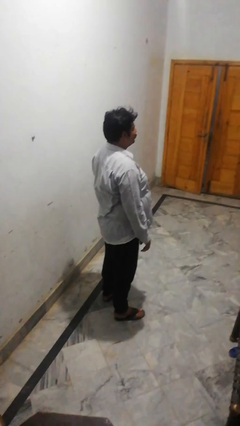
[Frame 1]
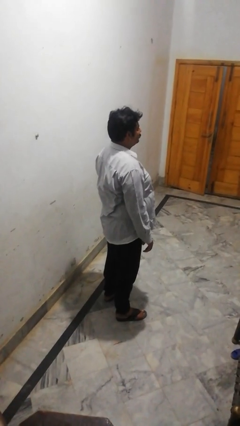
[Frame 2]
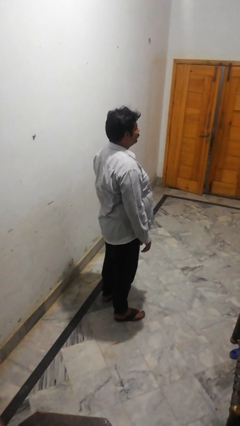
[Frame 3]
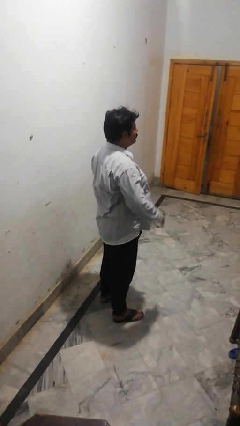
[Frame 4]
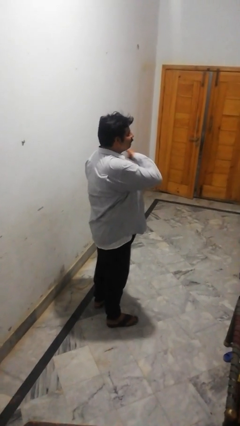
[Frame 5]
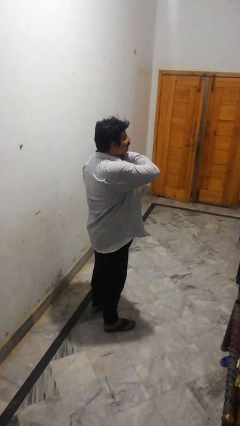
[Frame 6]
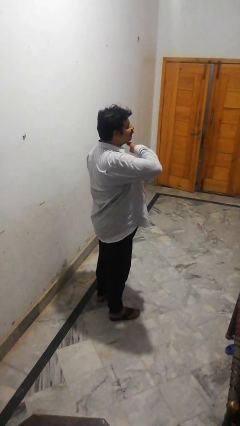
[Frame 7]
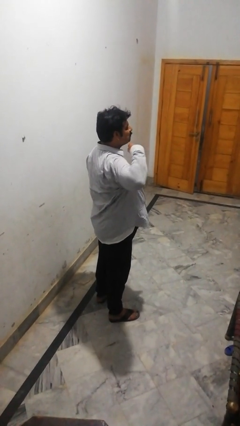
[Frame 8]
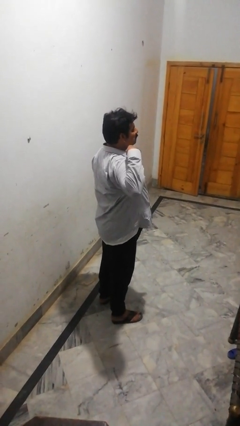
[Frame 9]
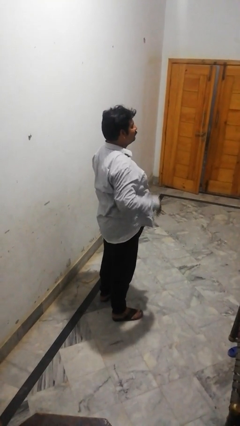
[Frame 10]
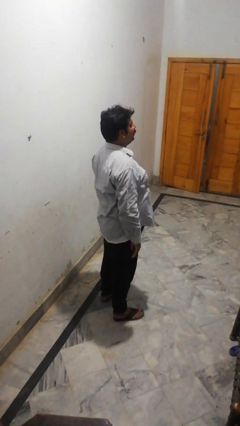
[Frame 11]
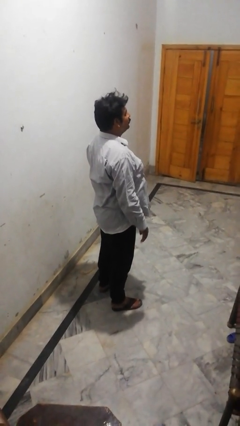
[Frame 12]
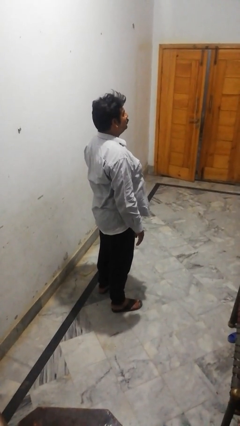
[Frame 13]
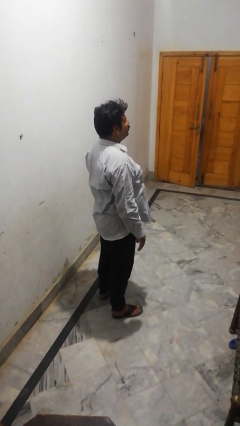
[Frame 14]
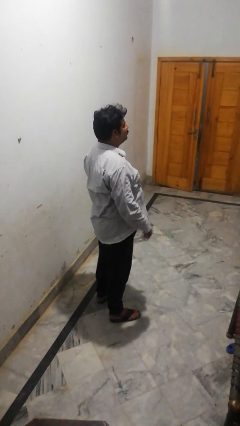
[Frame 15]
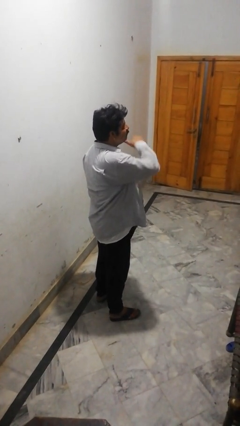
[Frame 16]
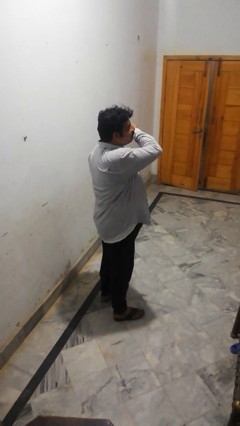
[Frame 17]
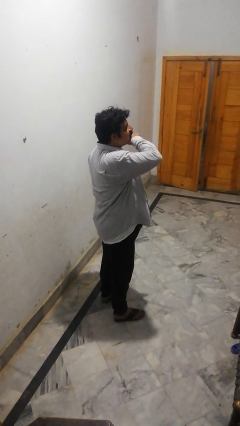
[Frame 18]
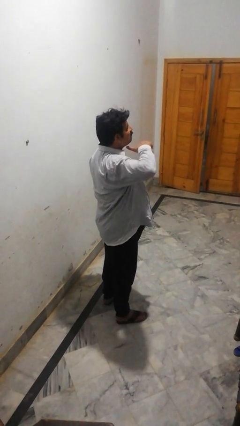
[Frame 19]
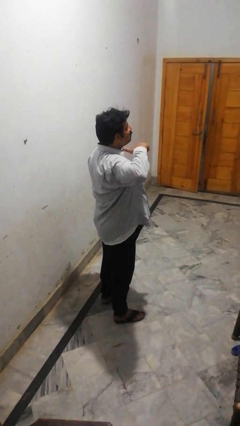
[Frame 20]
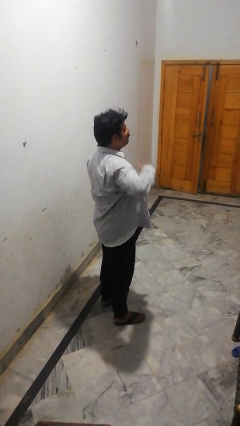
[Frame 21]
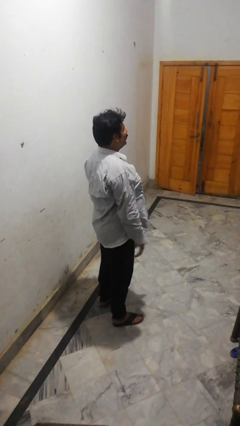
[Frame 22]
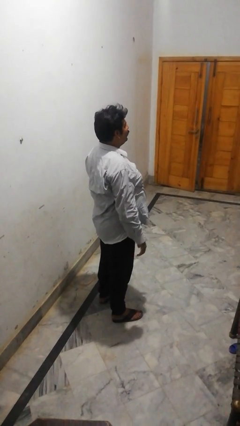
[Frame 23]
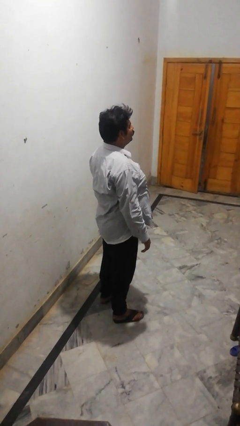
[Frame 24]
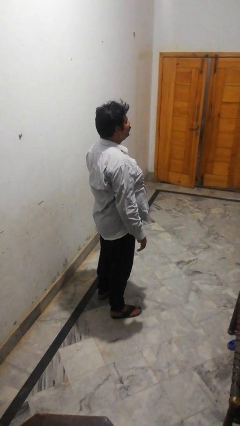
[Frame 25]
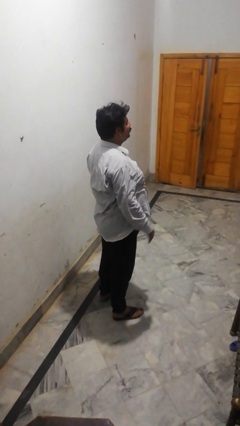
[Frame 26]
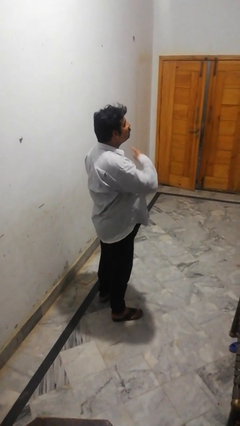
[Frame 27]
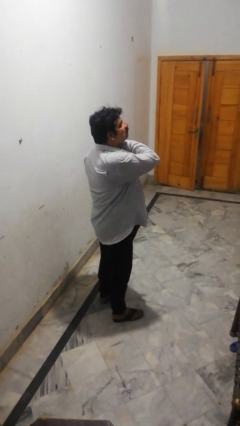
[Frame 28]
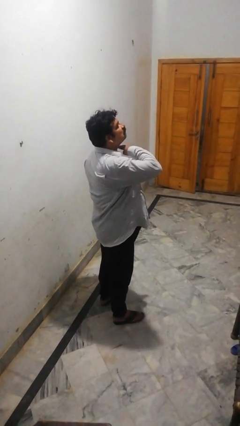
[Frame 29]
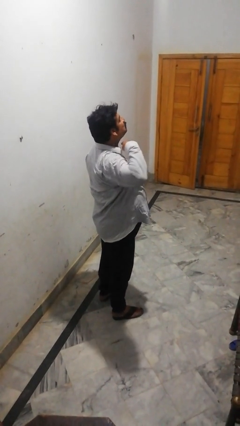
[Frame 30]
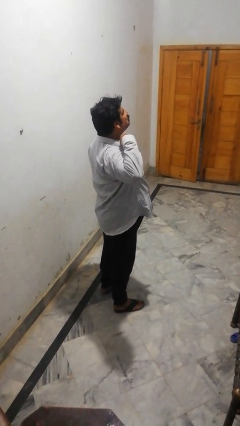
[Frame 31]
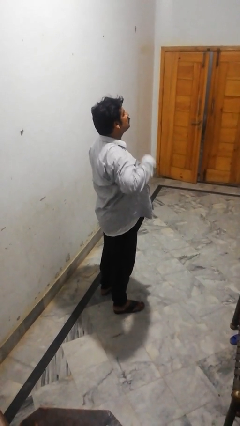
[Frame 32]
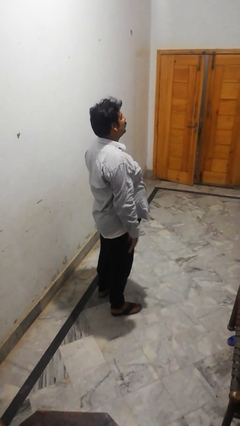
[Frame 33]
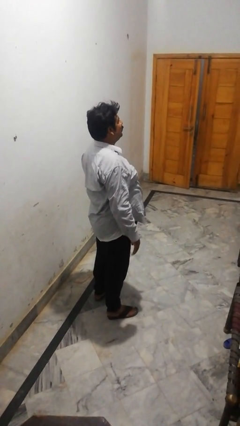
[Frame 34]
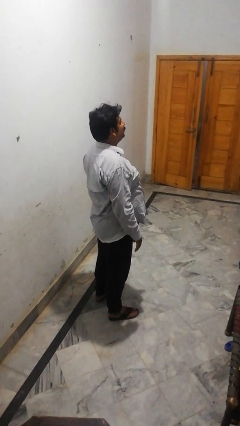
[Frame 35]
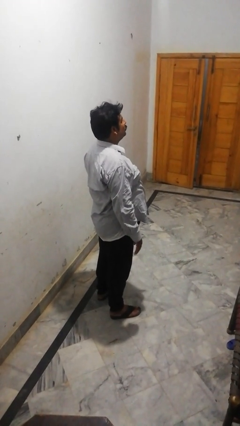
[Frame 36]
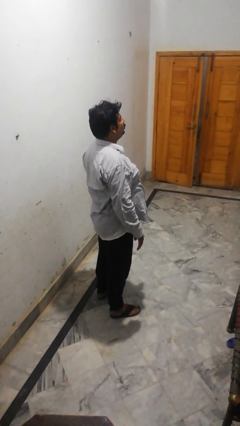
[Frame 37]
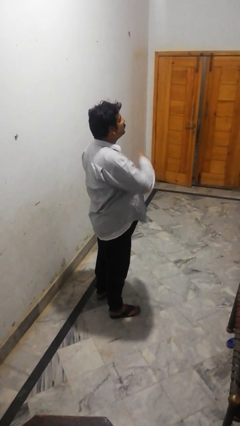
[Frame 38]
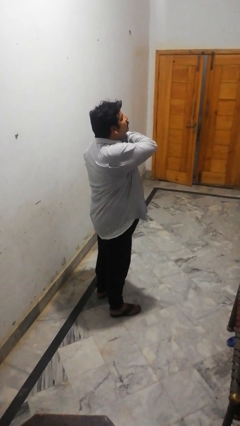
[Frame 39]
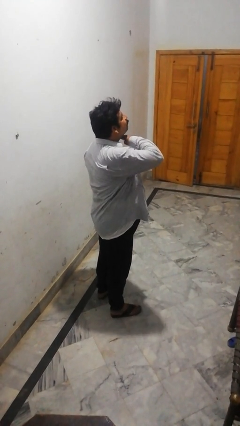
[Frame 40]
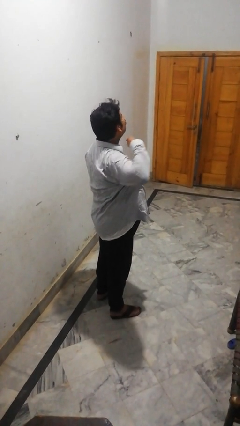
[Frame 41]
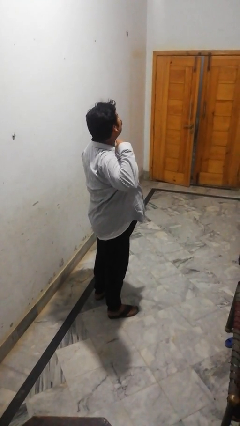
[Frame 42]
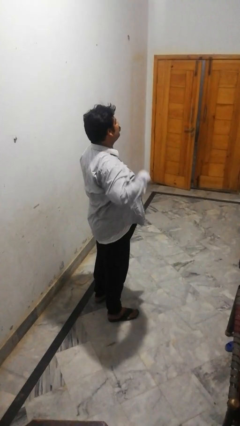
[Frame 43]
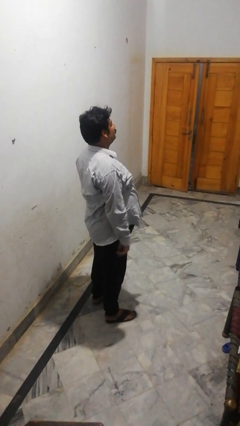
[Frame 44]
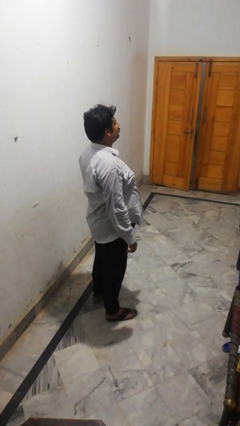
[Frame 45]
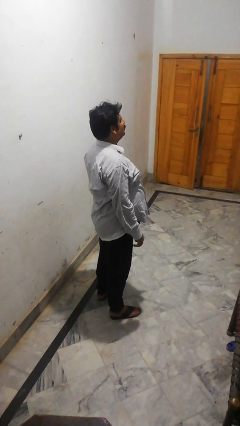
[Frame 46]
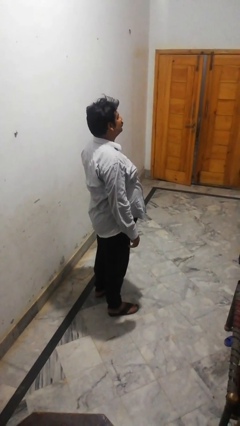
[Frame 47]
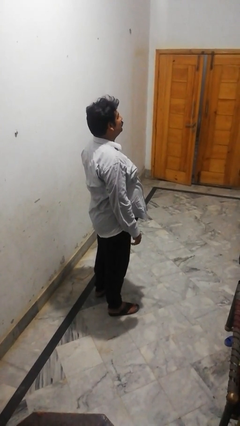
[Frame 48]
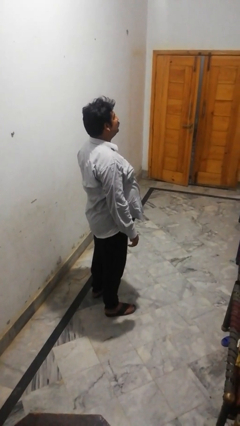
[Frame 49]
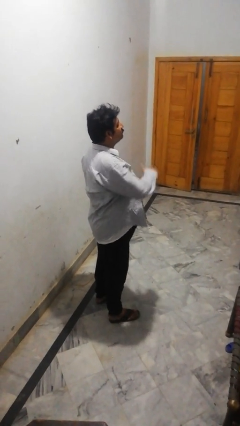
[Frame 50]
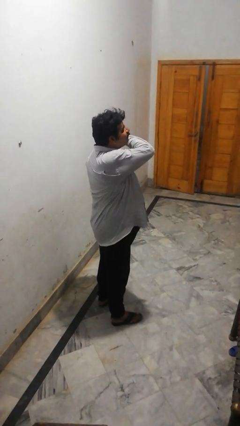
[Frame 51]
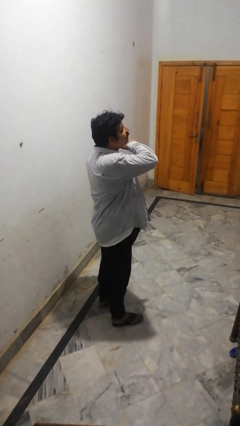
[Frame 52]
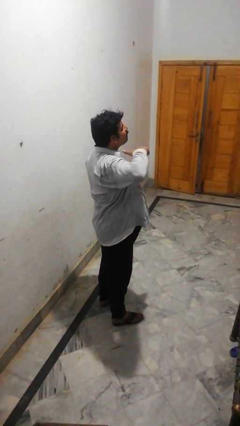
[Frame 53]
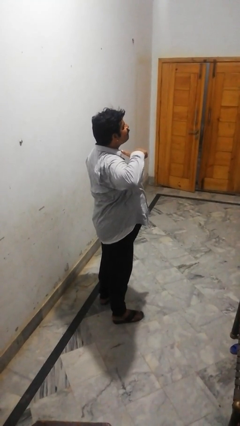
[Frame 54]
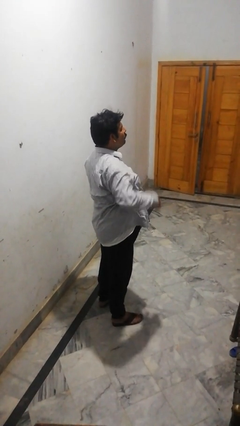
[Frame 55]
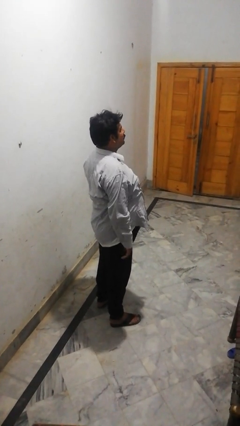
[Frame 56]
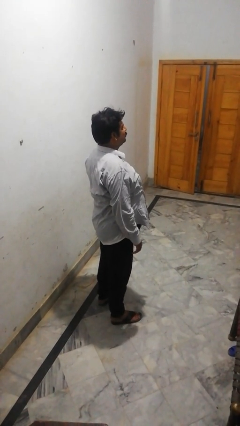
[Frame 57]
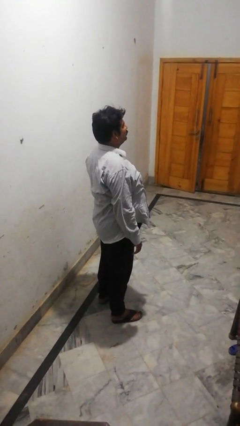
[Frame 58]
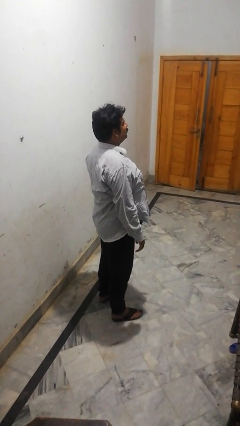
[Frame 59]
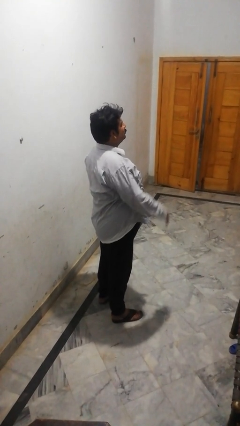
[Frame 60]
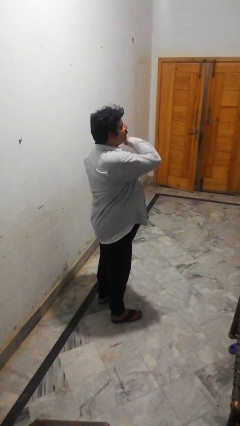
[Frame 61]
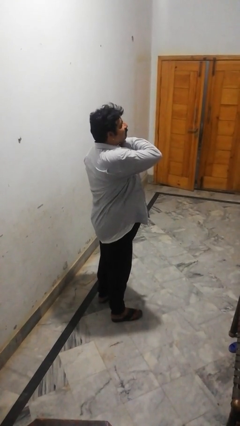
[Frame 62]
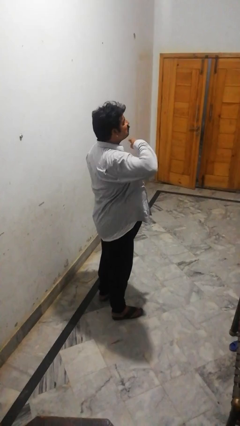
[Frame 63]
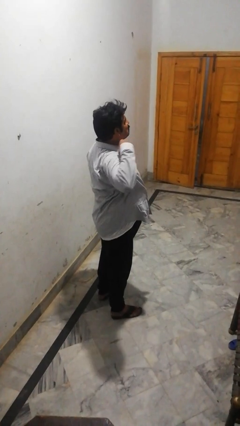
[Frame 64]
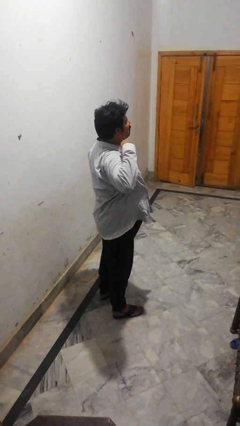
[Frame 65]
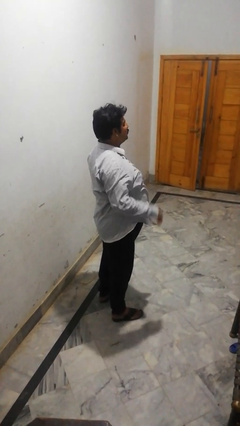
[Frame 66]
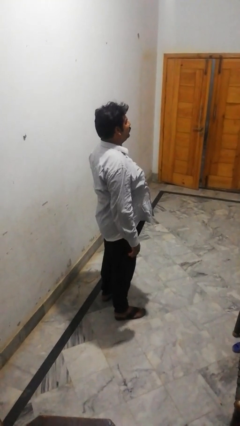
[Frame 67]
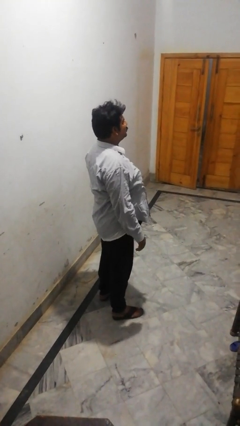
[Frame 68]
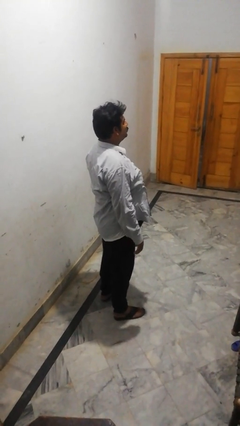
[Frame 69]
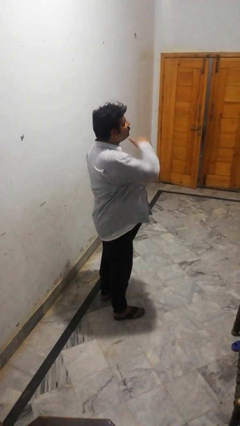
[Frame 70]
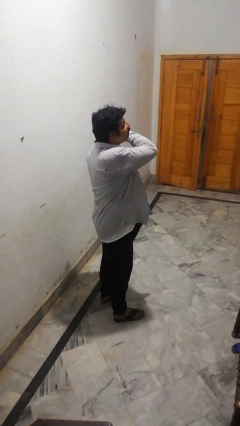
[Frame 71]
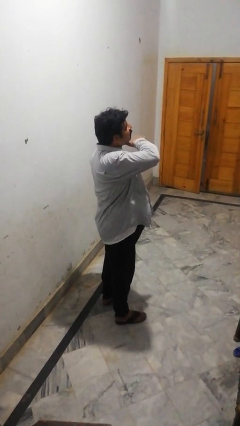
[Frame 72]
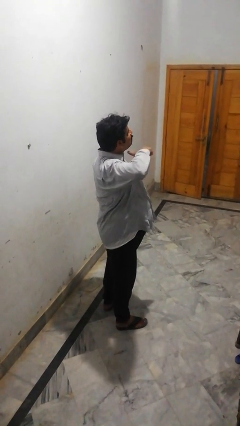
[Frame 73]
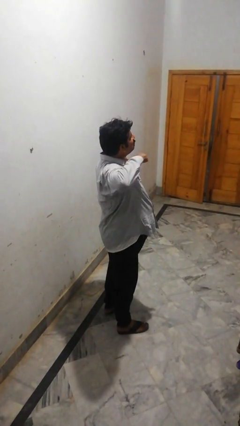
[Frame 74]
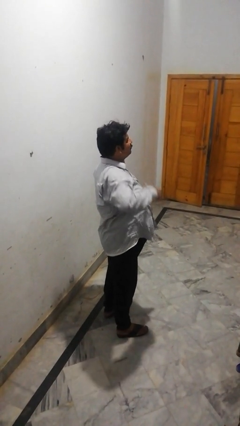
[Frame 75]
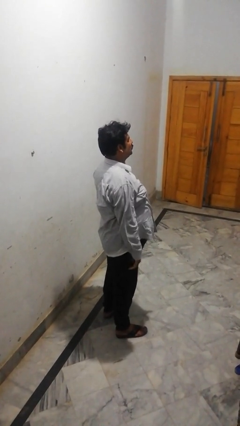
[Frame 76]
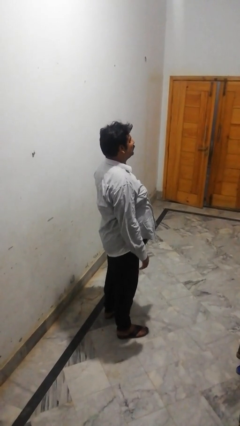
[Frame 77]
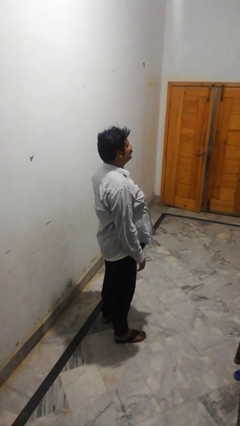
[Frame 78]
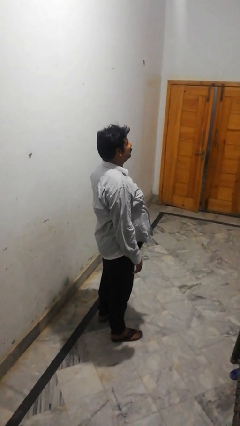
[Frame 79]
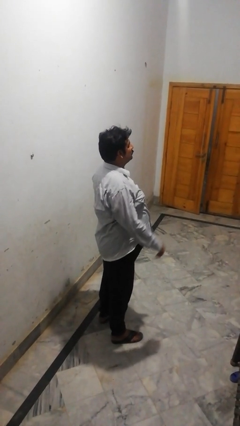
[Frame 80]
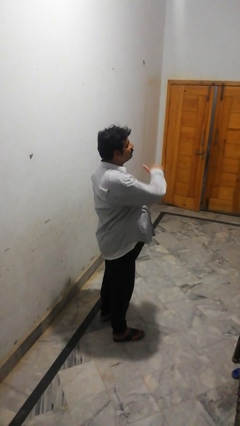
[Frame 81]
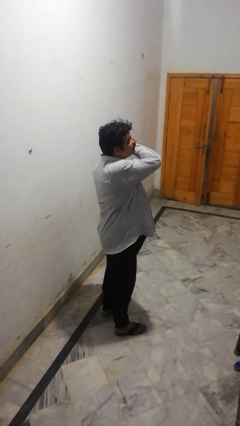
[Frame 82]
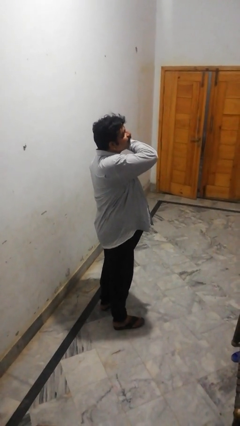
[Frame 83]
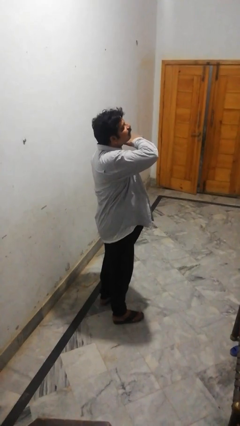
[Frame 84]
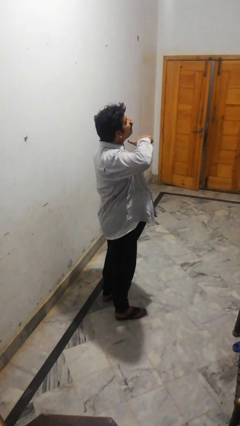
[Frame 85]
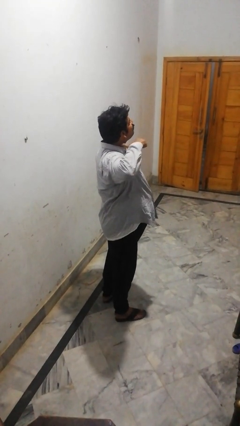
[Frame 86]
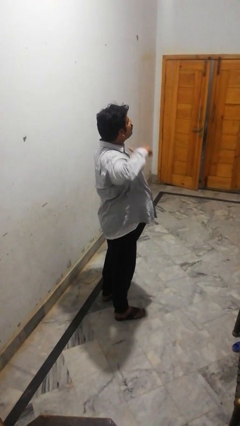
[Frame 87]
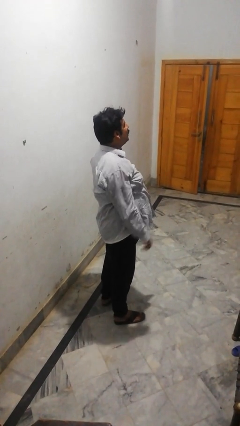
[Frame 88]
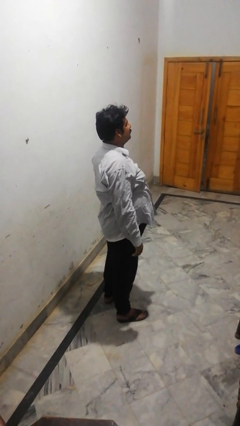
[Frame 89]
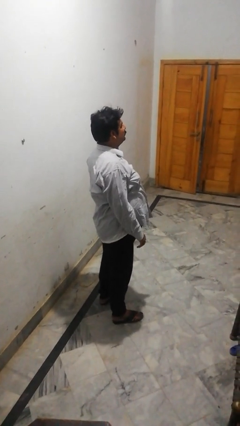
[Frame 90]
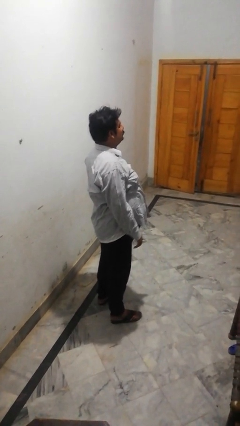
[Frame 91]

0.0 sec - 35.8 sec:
person gestures cut

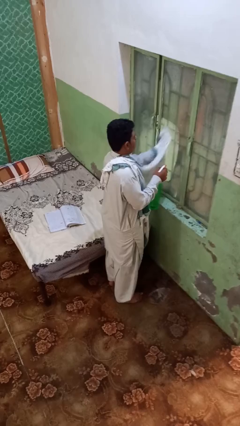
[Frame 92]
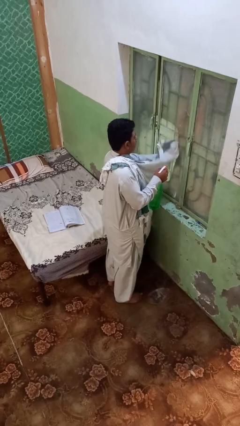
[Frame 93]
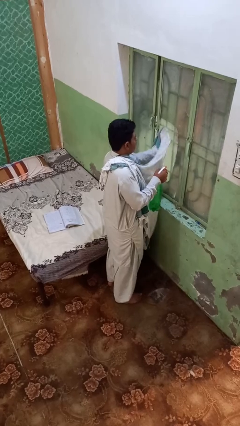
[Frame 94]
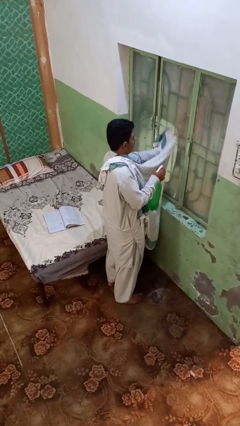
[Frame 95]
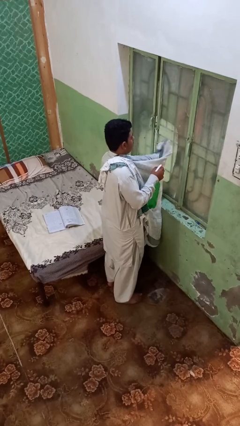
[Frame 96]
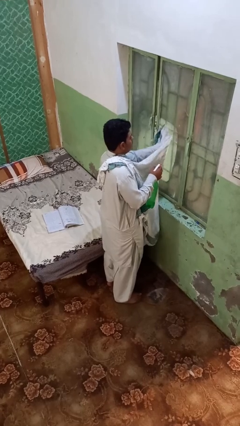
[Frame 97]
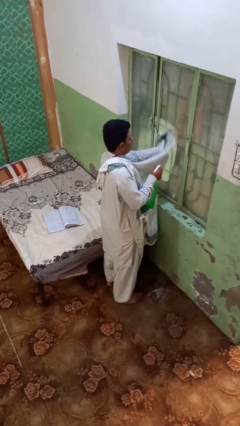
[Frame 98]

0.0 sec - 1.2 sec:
person washes window
